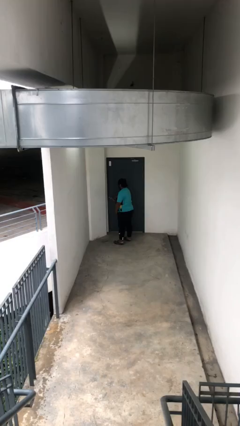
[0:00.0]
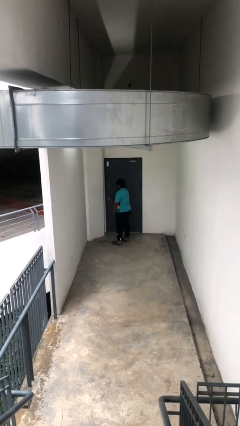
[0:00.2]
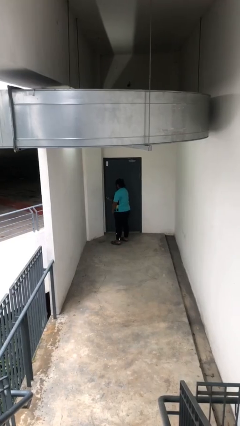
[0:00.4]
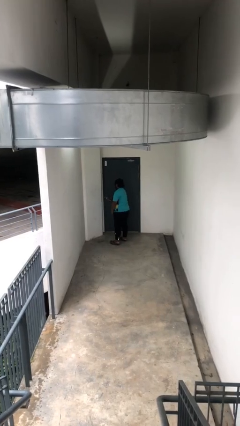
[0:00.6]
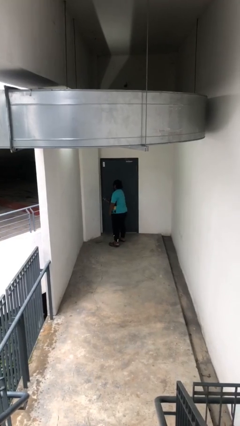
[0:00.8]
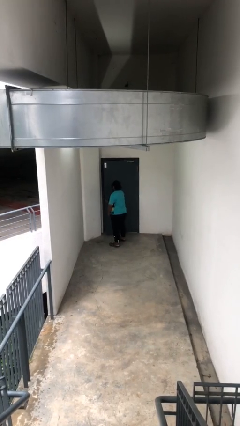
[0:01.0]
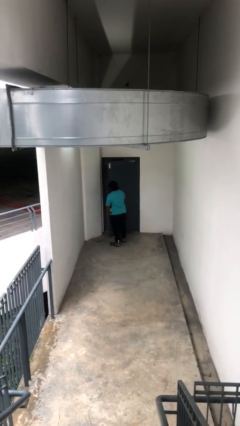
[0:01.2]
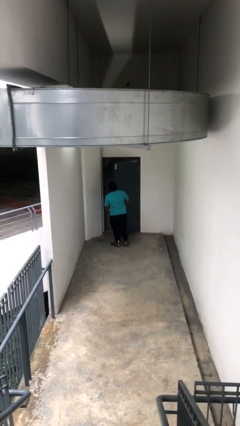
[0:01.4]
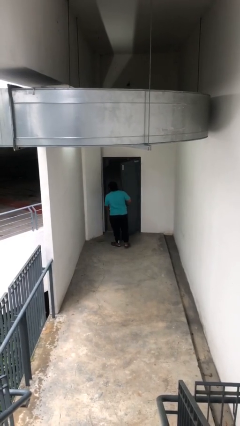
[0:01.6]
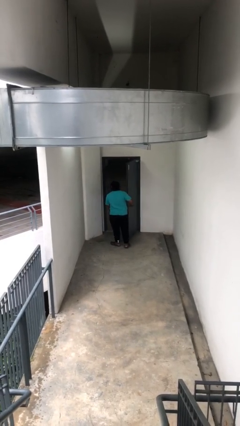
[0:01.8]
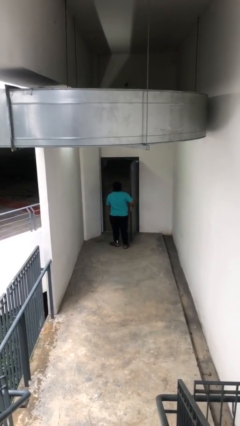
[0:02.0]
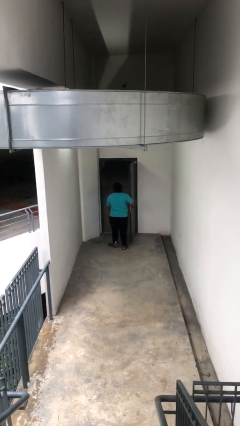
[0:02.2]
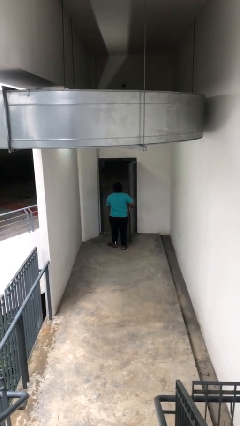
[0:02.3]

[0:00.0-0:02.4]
person opens facility door

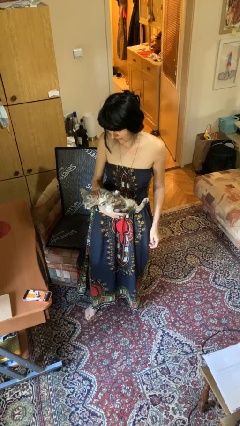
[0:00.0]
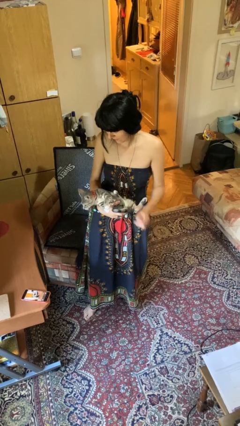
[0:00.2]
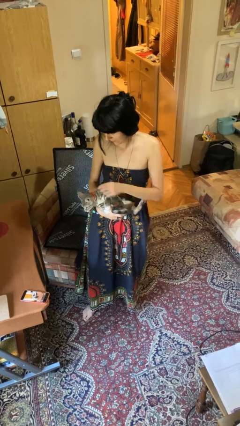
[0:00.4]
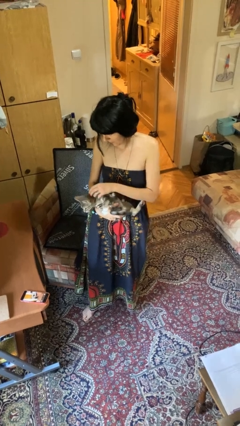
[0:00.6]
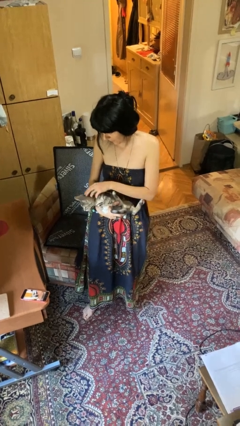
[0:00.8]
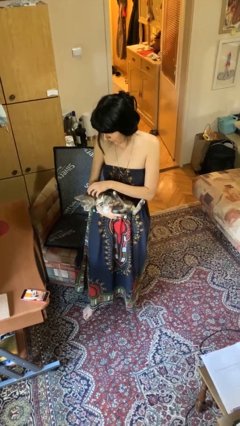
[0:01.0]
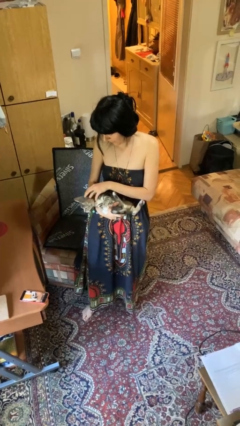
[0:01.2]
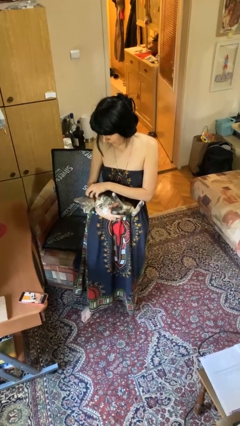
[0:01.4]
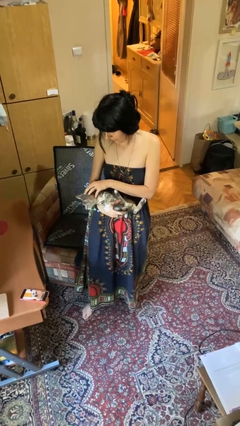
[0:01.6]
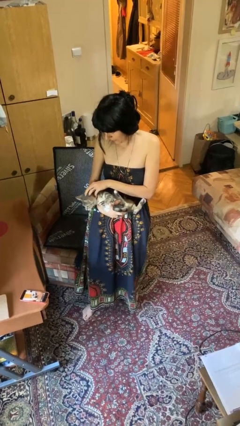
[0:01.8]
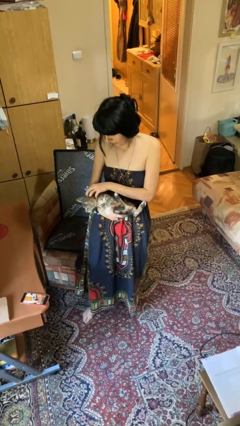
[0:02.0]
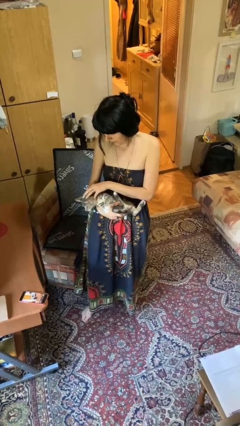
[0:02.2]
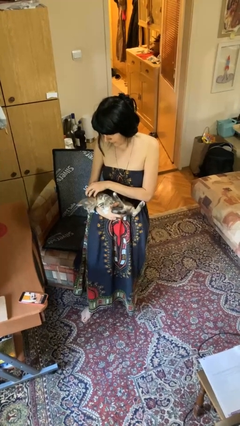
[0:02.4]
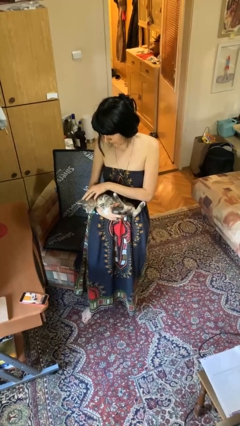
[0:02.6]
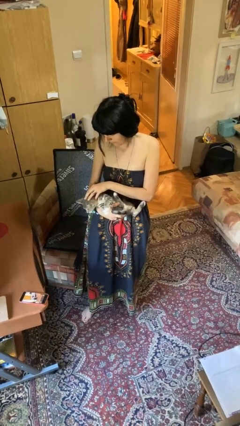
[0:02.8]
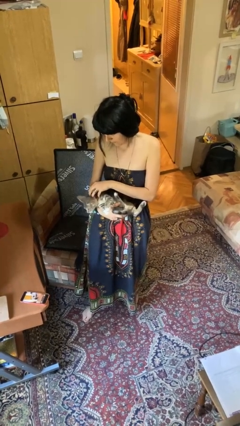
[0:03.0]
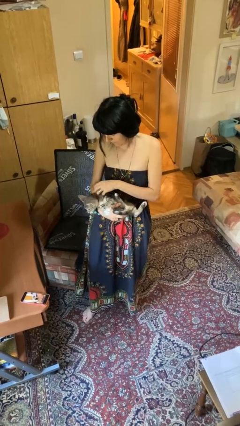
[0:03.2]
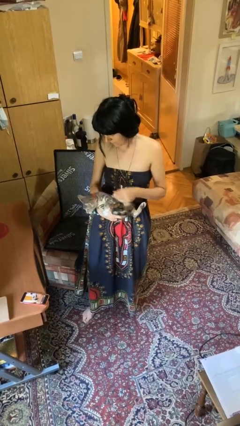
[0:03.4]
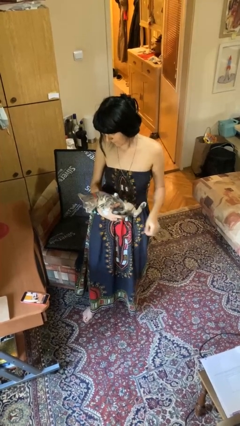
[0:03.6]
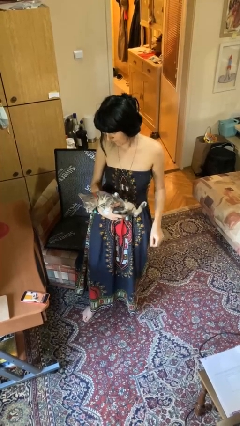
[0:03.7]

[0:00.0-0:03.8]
person pets cat

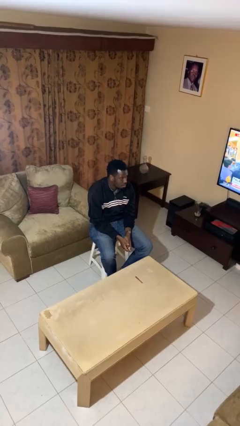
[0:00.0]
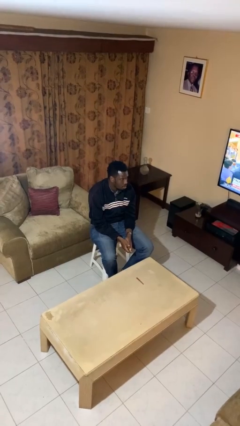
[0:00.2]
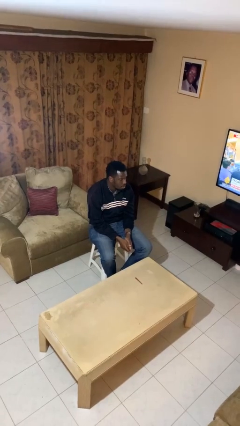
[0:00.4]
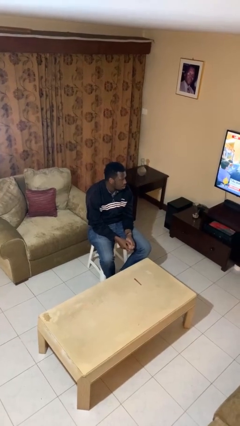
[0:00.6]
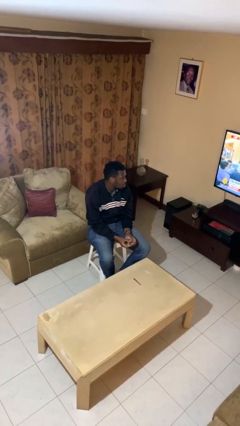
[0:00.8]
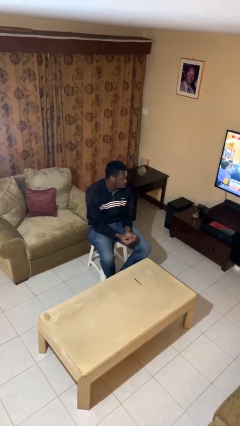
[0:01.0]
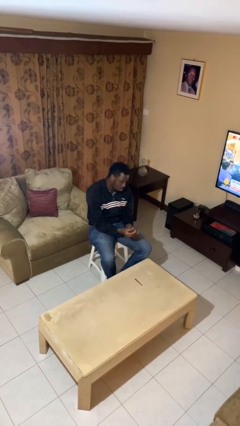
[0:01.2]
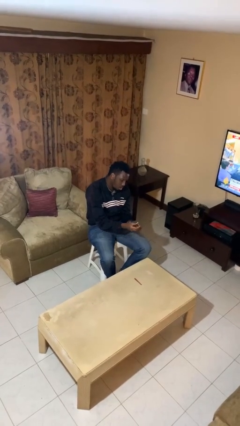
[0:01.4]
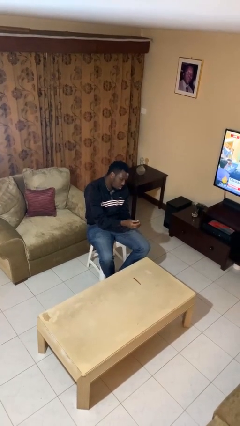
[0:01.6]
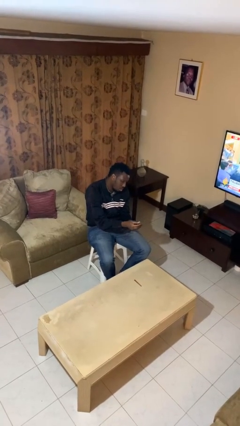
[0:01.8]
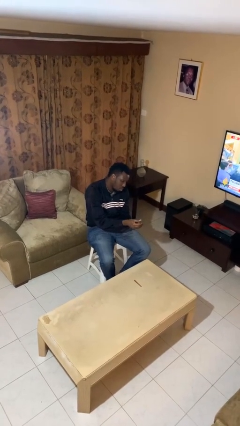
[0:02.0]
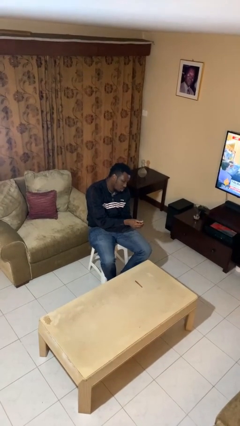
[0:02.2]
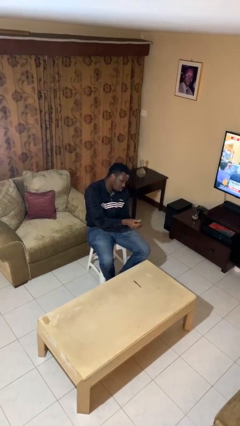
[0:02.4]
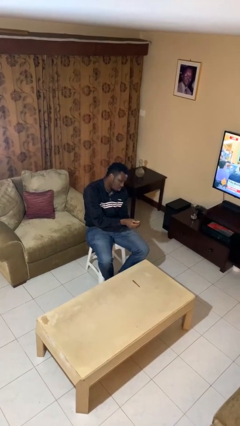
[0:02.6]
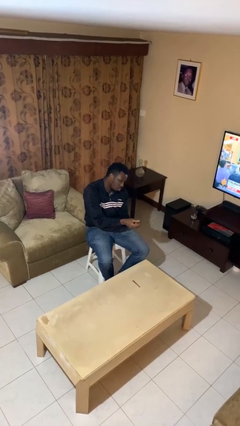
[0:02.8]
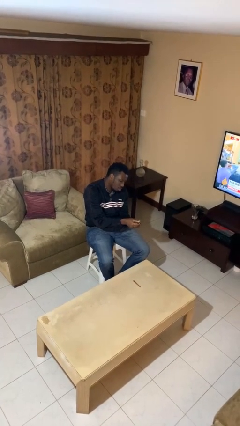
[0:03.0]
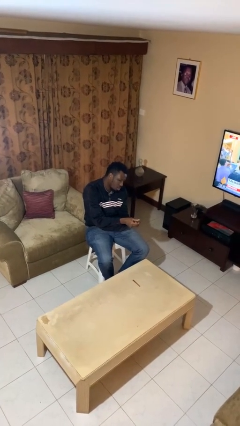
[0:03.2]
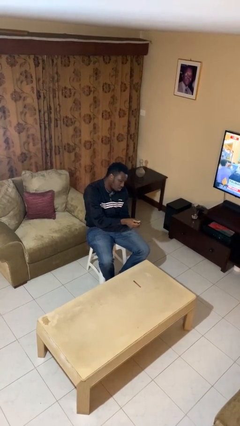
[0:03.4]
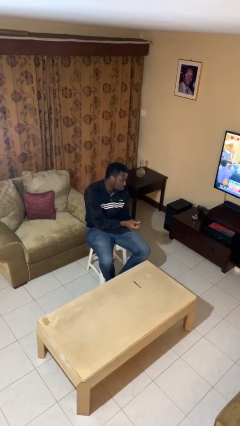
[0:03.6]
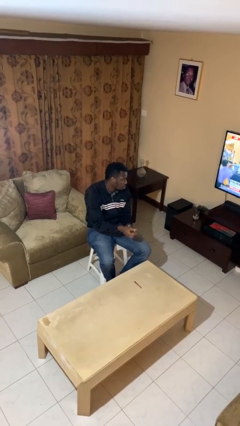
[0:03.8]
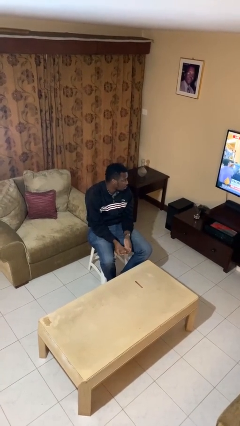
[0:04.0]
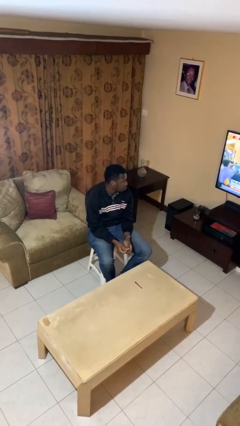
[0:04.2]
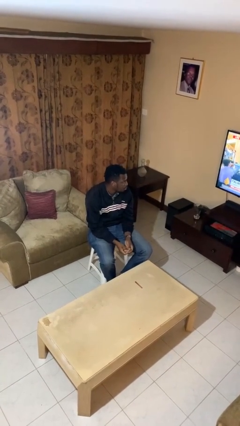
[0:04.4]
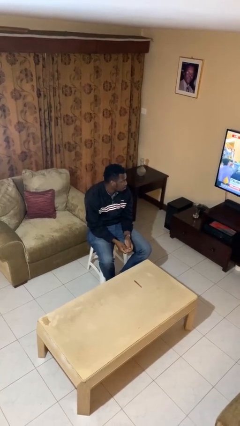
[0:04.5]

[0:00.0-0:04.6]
person clips fingernails

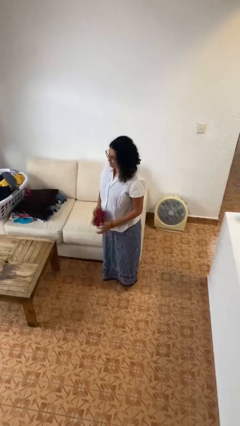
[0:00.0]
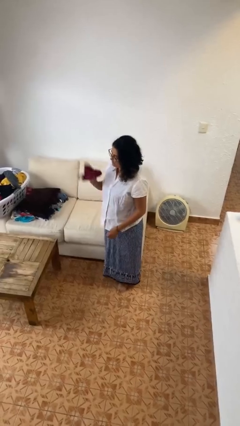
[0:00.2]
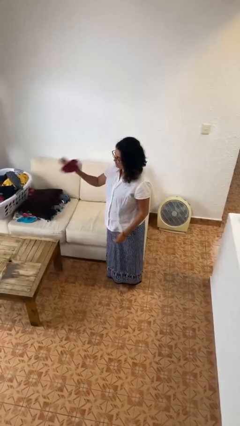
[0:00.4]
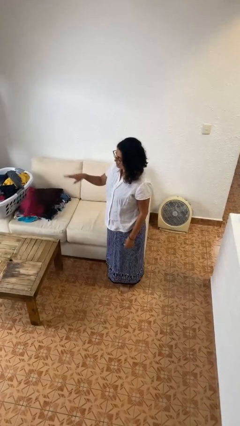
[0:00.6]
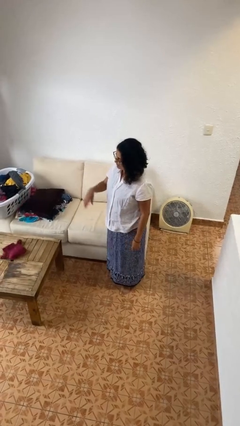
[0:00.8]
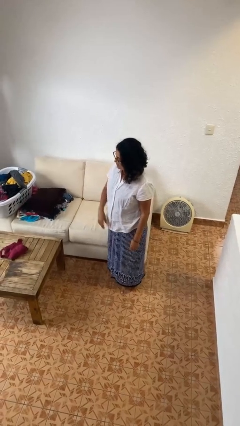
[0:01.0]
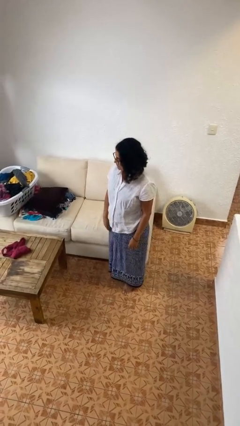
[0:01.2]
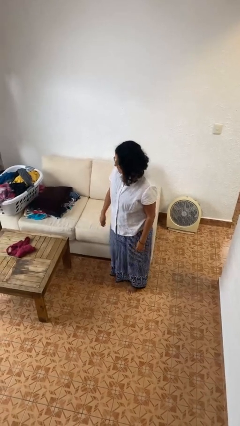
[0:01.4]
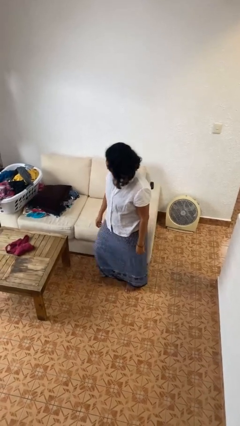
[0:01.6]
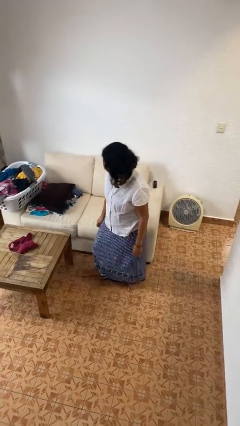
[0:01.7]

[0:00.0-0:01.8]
person throws object on table

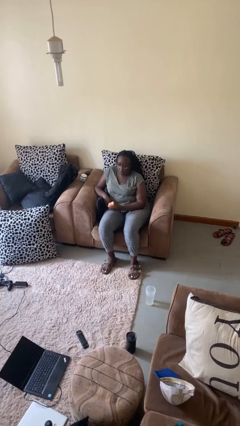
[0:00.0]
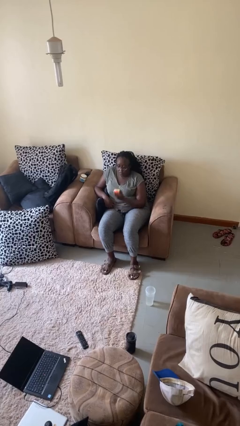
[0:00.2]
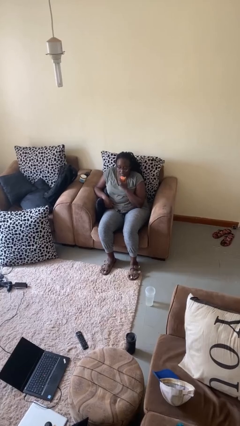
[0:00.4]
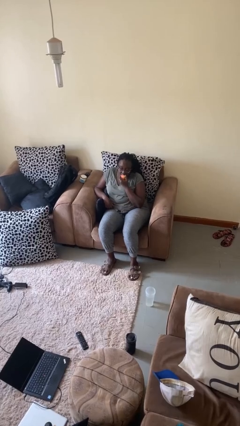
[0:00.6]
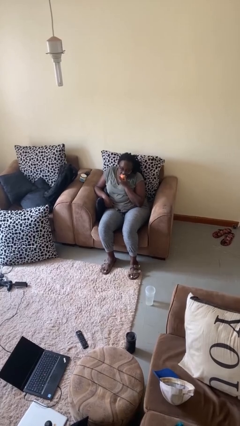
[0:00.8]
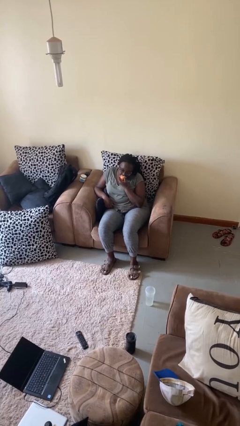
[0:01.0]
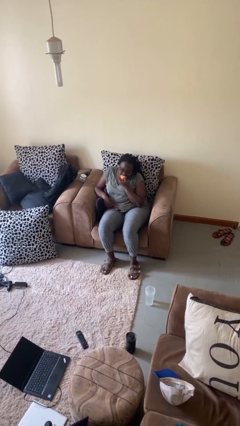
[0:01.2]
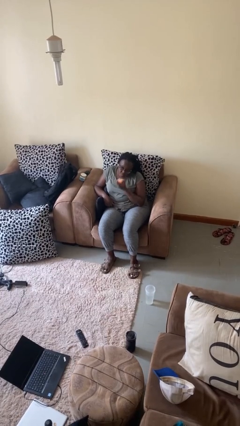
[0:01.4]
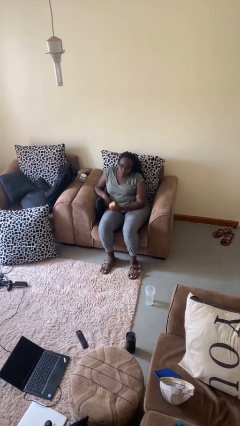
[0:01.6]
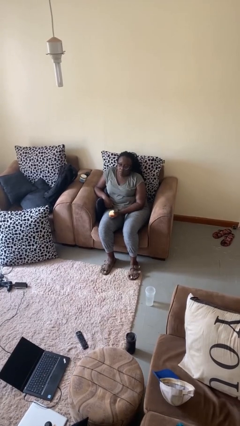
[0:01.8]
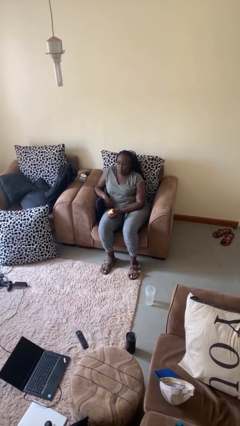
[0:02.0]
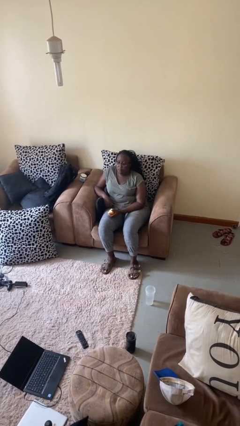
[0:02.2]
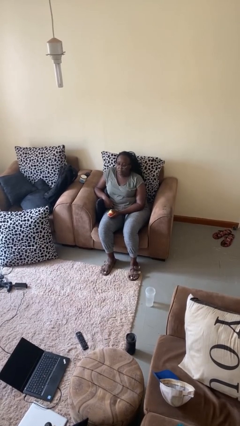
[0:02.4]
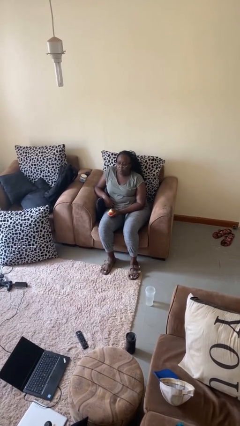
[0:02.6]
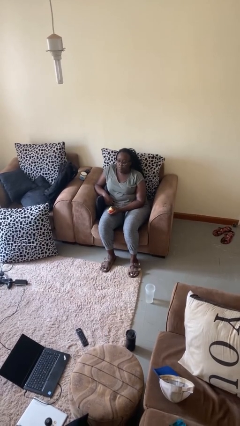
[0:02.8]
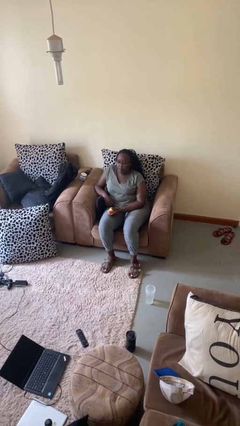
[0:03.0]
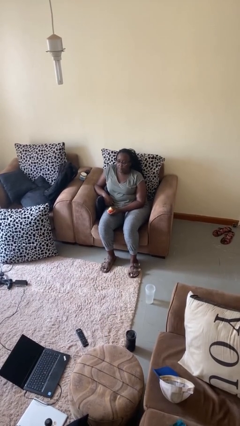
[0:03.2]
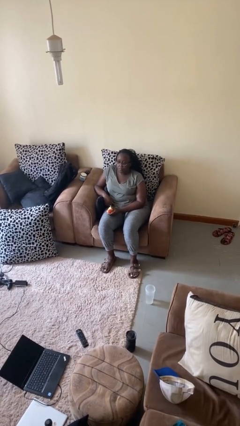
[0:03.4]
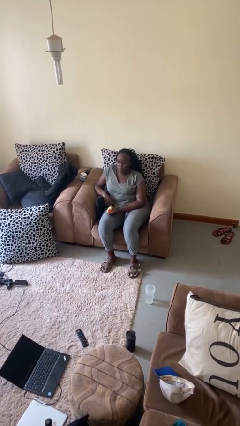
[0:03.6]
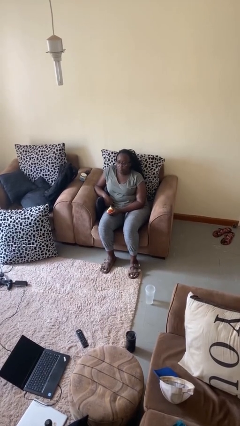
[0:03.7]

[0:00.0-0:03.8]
person eats apple

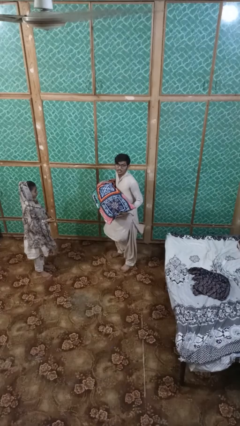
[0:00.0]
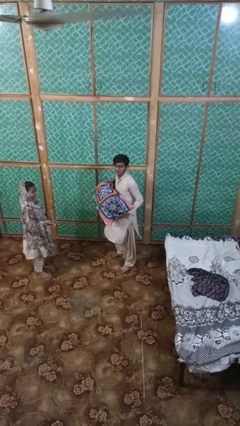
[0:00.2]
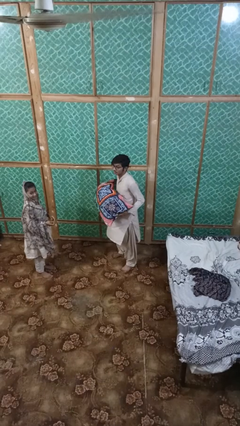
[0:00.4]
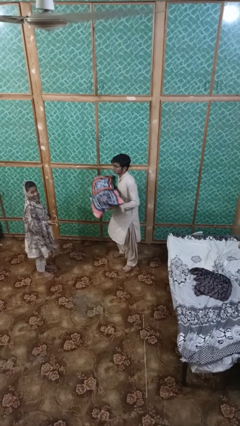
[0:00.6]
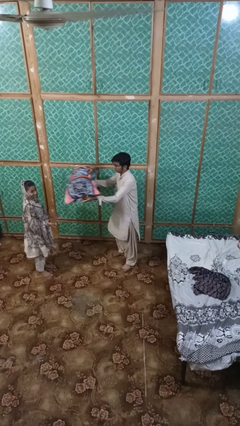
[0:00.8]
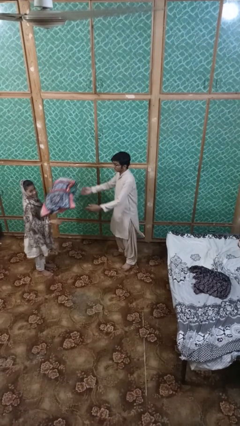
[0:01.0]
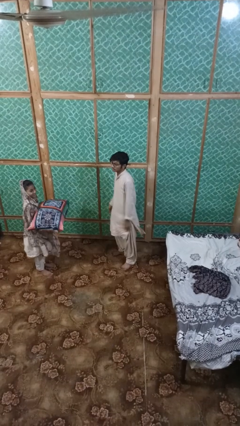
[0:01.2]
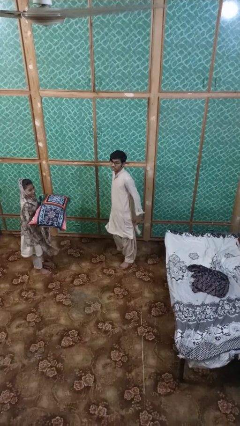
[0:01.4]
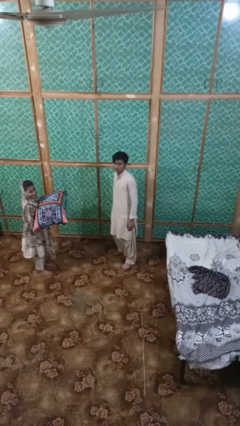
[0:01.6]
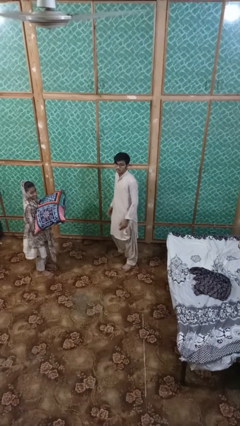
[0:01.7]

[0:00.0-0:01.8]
person throws object to person
